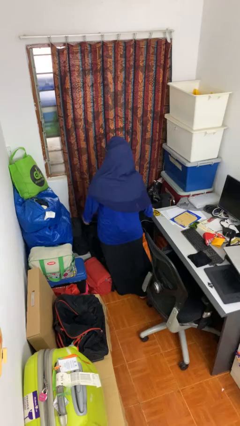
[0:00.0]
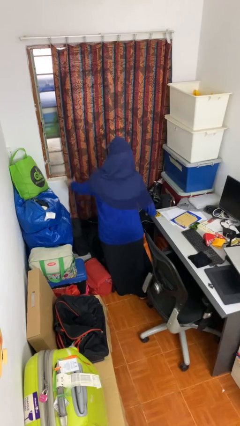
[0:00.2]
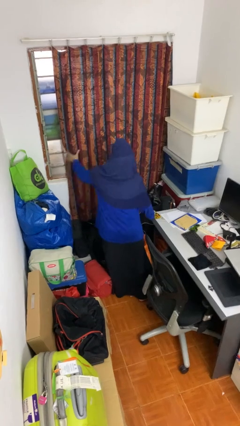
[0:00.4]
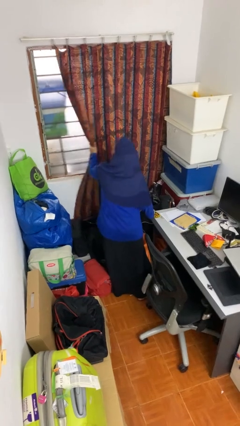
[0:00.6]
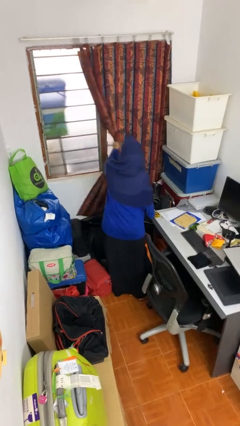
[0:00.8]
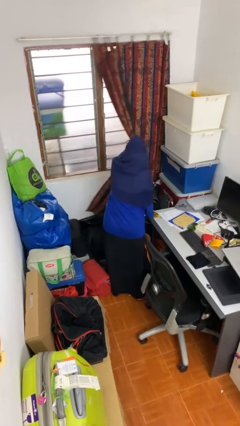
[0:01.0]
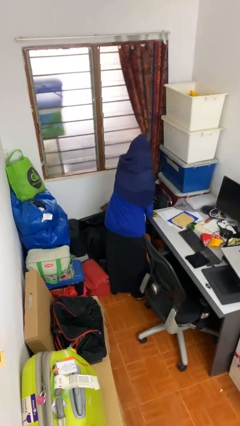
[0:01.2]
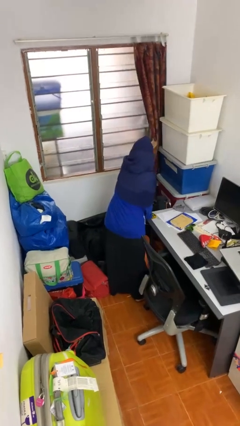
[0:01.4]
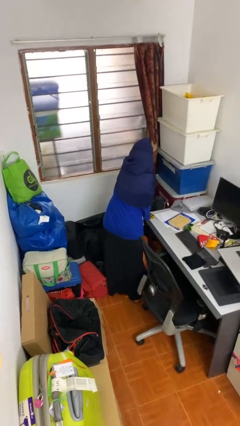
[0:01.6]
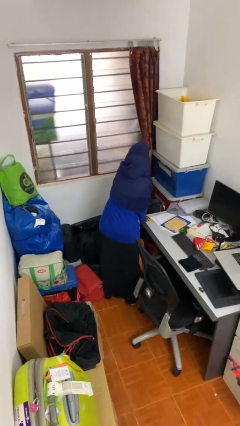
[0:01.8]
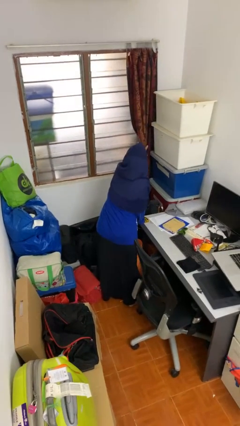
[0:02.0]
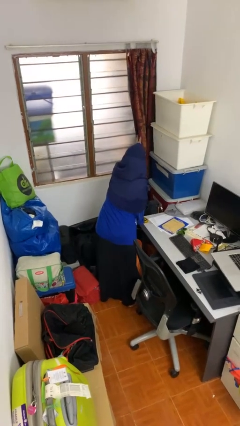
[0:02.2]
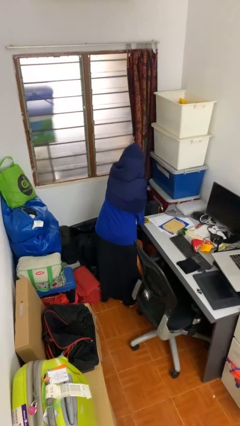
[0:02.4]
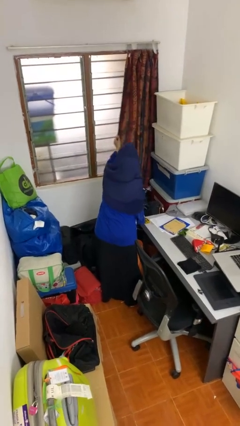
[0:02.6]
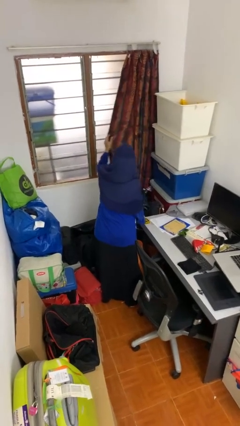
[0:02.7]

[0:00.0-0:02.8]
person opens curtains

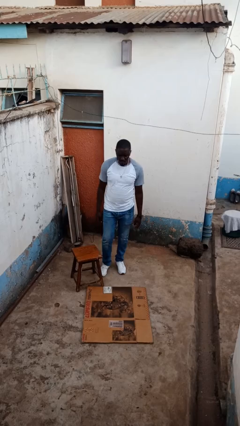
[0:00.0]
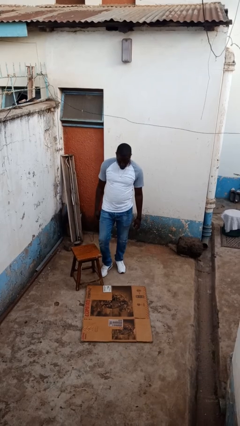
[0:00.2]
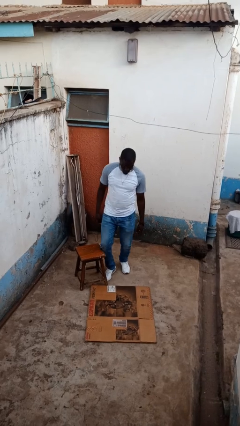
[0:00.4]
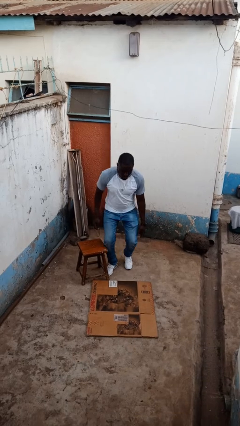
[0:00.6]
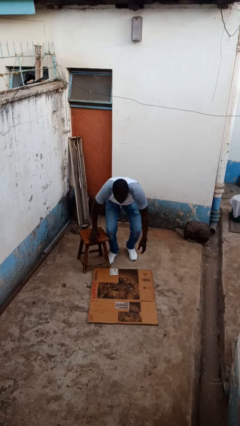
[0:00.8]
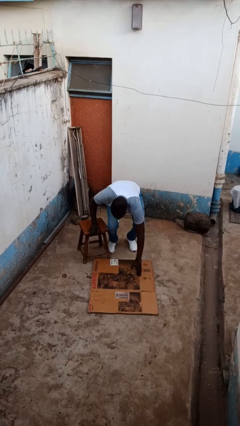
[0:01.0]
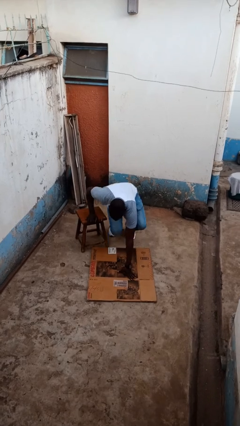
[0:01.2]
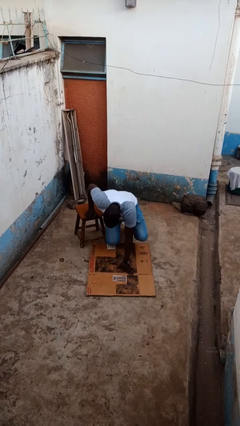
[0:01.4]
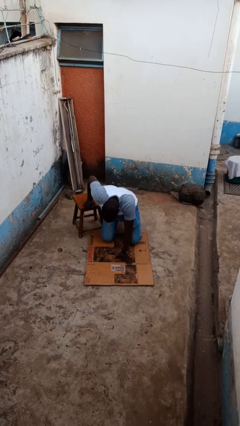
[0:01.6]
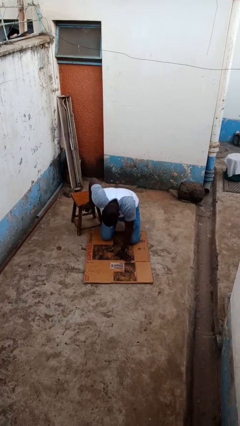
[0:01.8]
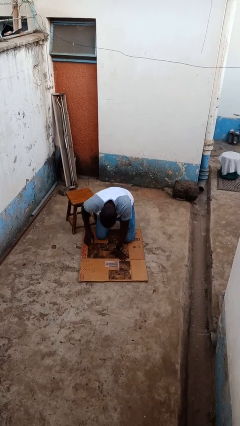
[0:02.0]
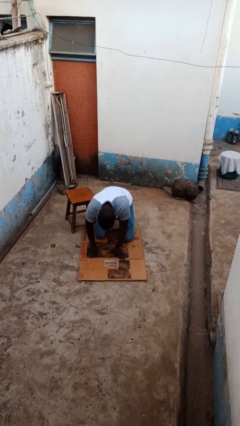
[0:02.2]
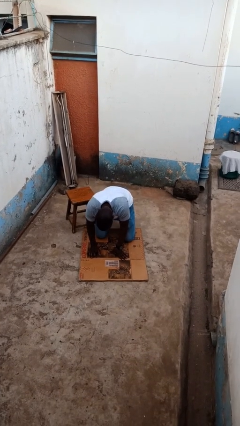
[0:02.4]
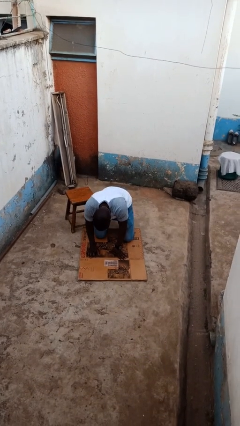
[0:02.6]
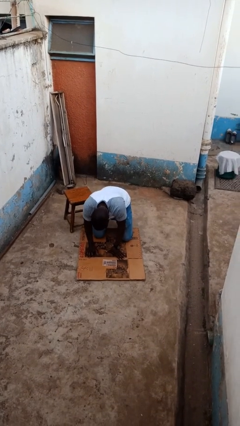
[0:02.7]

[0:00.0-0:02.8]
person trips on object on floor

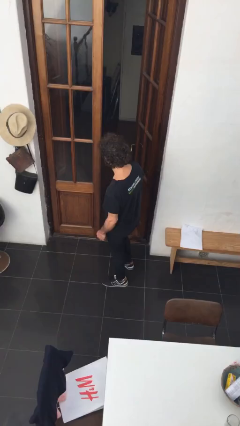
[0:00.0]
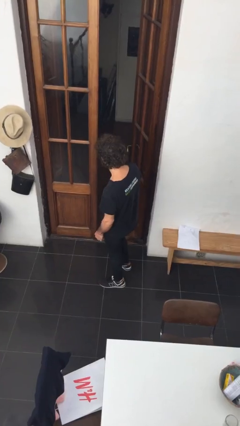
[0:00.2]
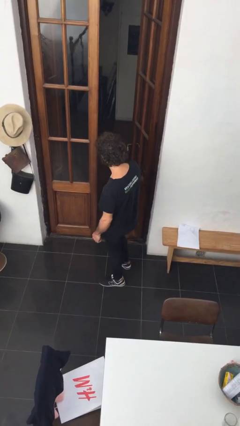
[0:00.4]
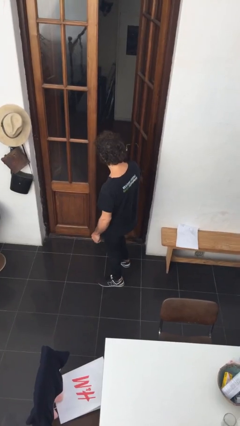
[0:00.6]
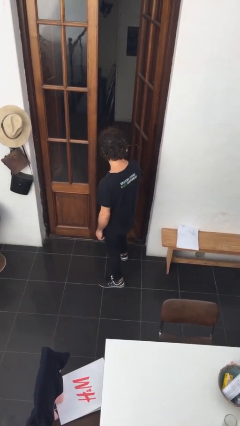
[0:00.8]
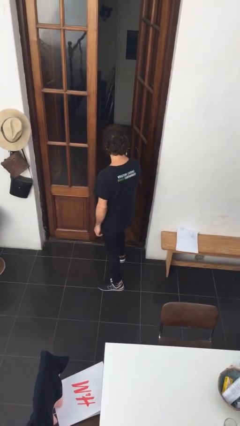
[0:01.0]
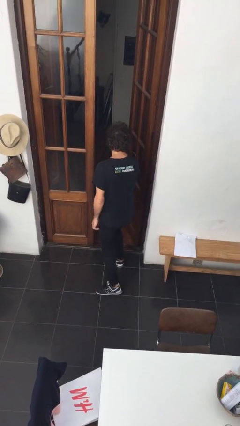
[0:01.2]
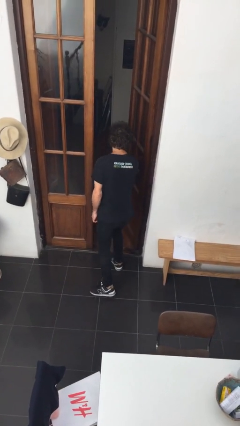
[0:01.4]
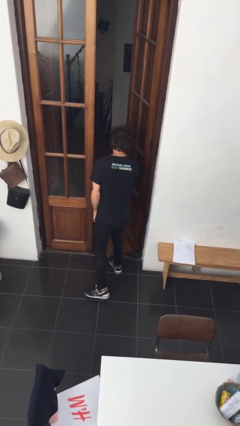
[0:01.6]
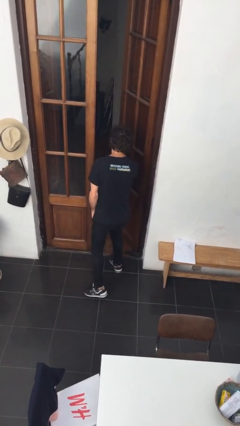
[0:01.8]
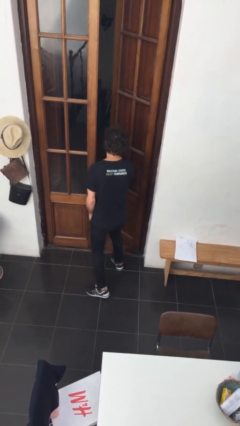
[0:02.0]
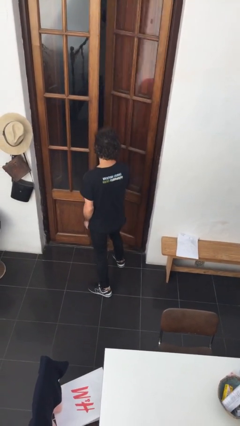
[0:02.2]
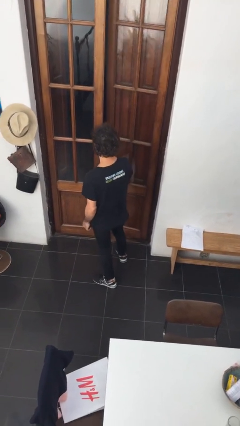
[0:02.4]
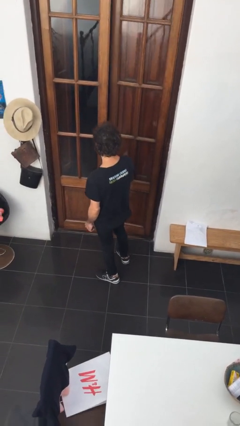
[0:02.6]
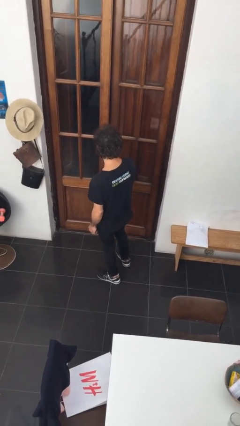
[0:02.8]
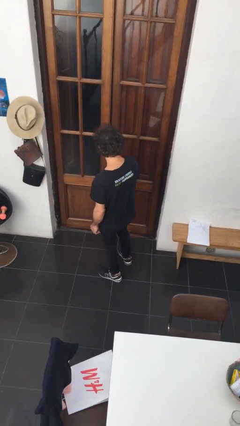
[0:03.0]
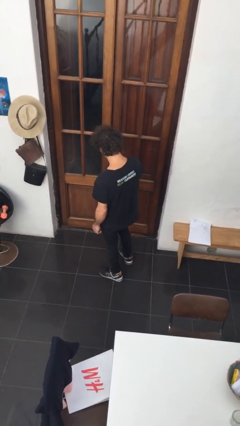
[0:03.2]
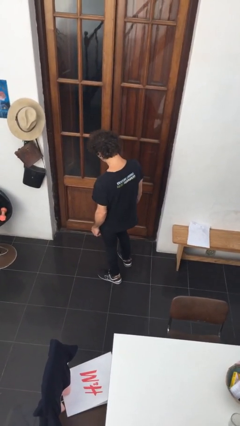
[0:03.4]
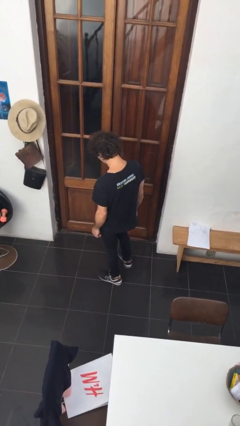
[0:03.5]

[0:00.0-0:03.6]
person closes facility door

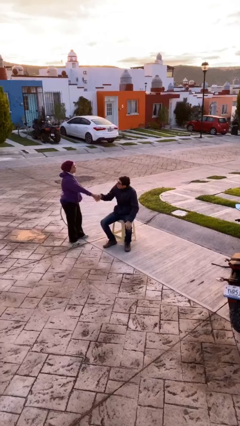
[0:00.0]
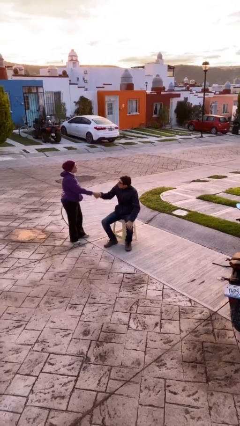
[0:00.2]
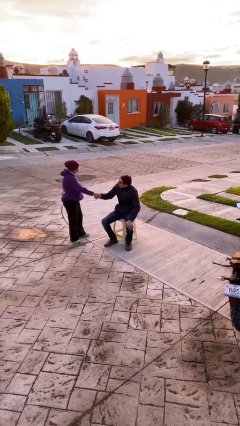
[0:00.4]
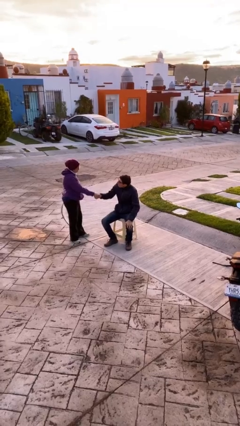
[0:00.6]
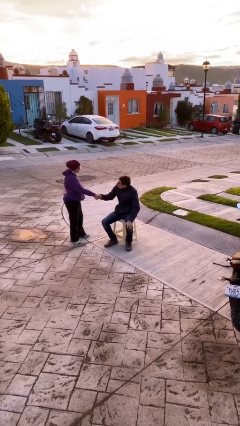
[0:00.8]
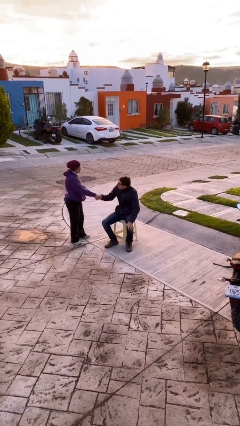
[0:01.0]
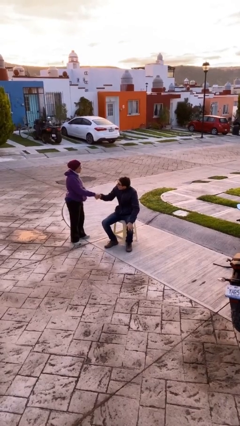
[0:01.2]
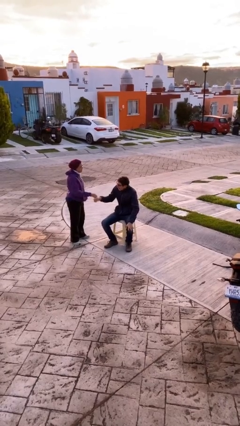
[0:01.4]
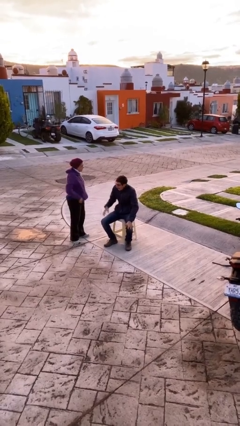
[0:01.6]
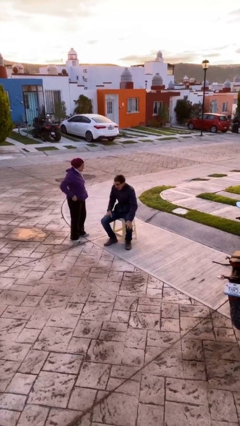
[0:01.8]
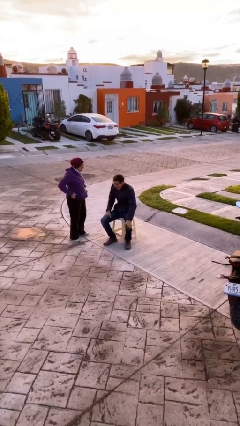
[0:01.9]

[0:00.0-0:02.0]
person shakes hand

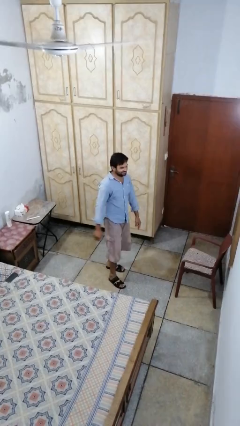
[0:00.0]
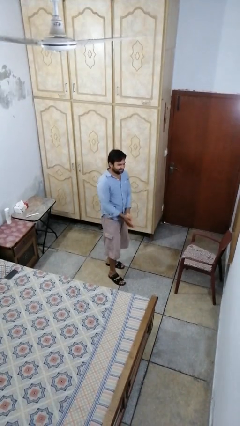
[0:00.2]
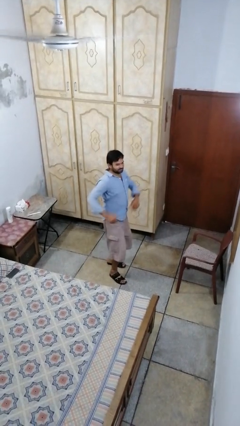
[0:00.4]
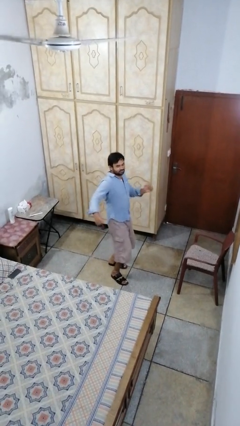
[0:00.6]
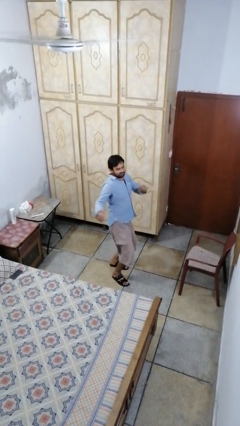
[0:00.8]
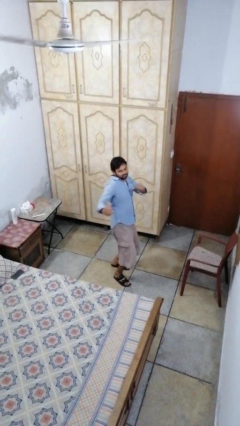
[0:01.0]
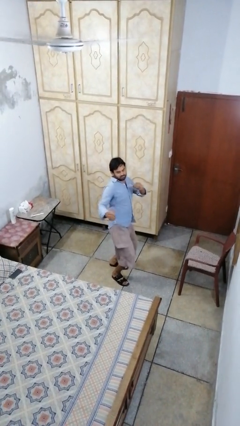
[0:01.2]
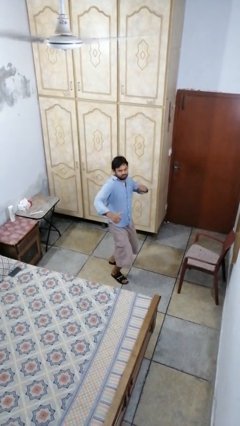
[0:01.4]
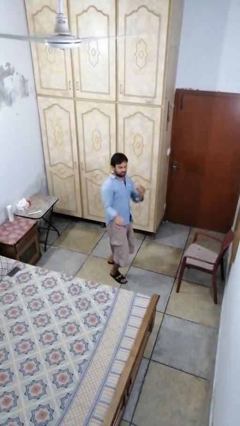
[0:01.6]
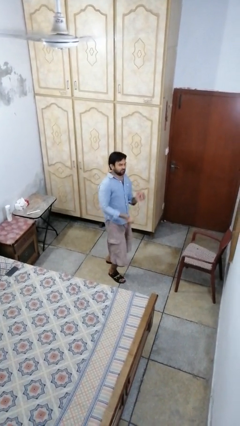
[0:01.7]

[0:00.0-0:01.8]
person dances in place

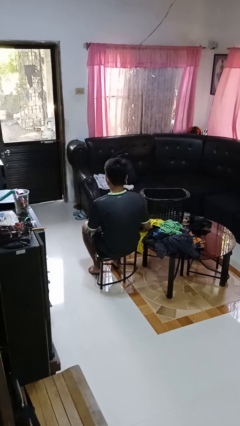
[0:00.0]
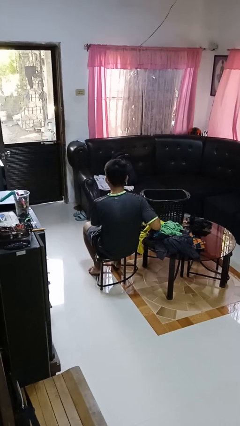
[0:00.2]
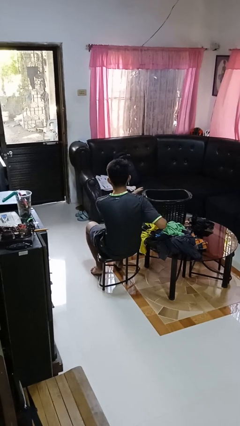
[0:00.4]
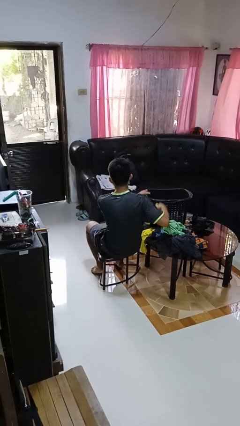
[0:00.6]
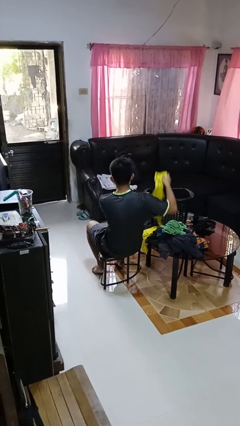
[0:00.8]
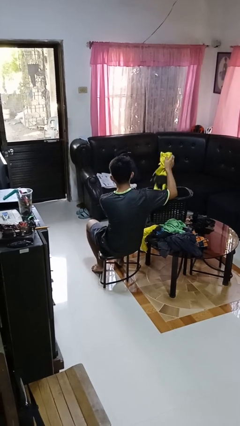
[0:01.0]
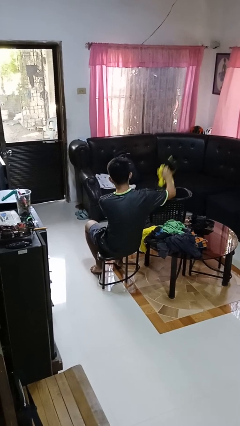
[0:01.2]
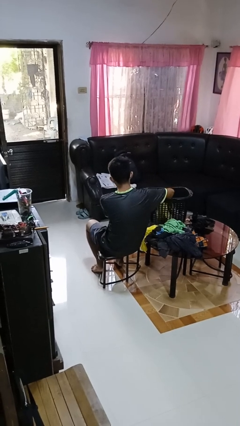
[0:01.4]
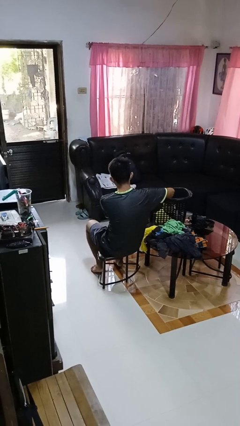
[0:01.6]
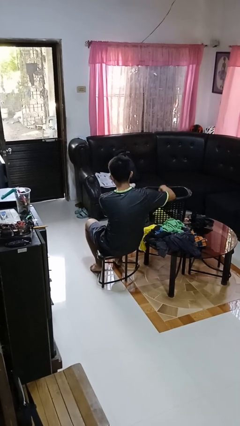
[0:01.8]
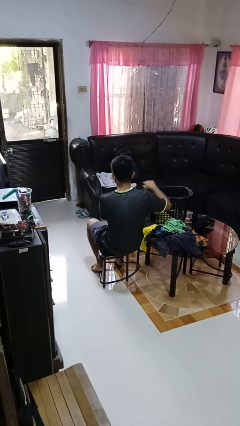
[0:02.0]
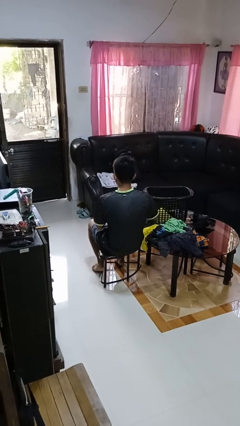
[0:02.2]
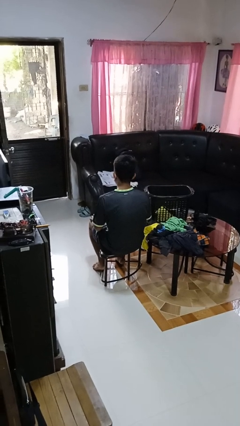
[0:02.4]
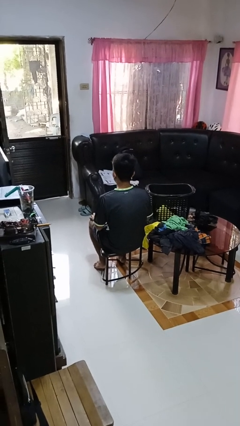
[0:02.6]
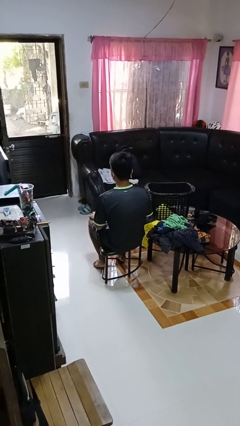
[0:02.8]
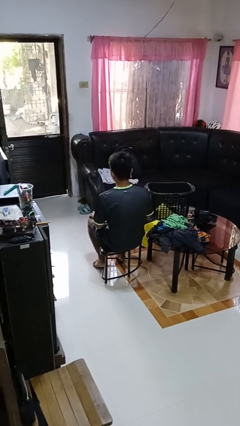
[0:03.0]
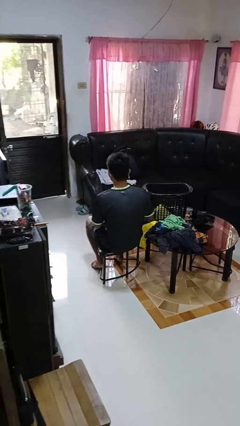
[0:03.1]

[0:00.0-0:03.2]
person puts object into basket

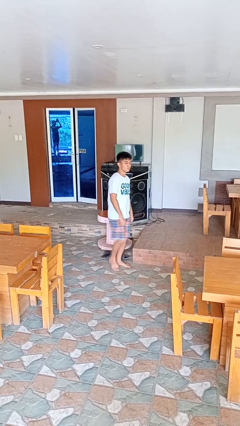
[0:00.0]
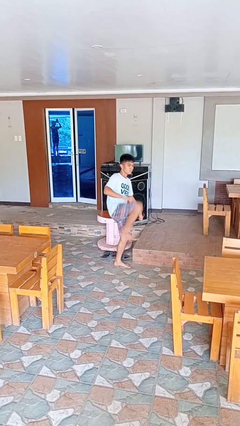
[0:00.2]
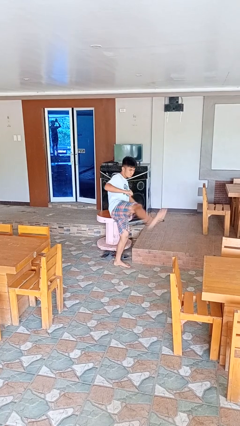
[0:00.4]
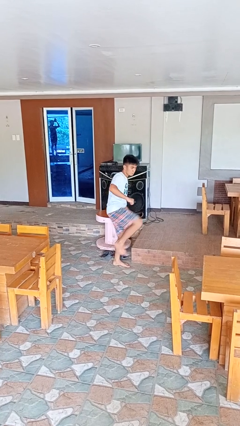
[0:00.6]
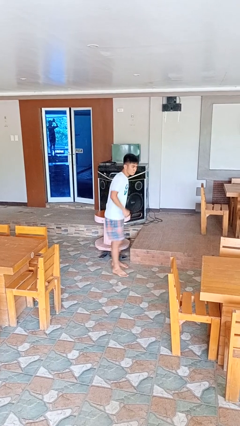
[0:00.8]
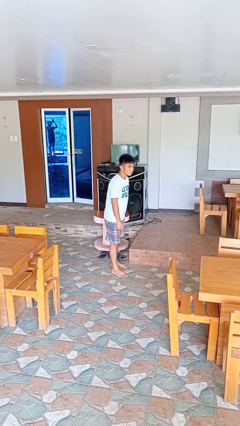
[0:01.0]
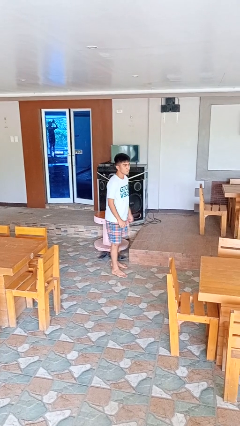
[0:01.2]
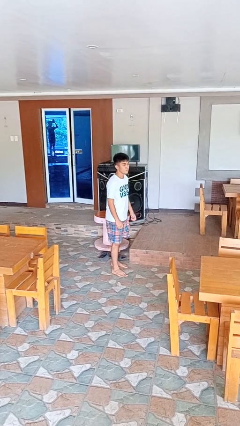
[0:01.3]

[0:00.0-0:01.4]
person karate kicks
